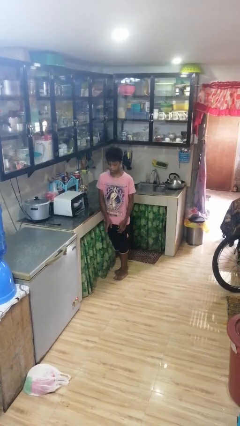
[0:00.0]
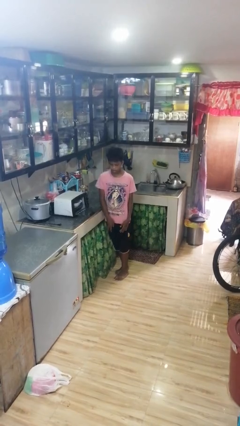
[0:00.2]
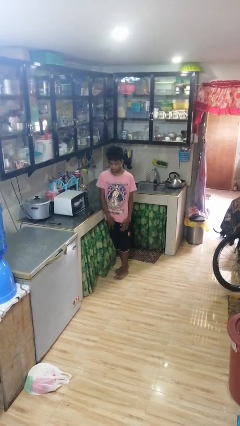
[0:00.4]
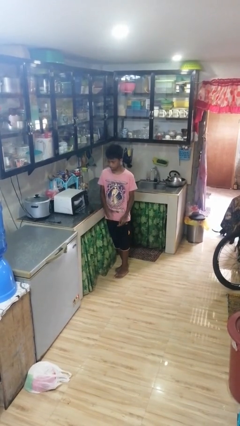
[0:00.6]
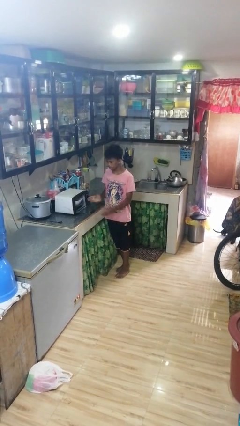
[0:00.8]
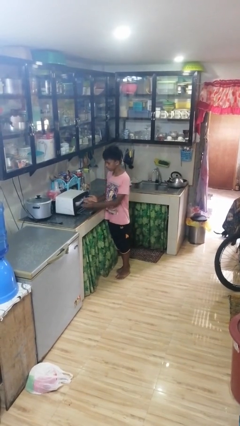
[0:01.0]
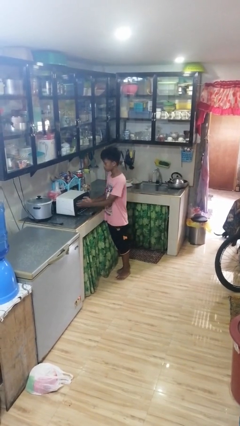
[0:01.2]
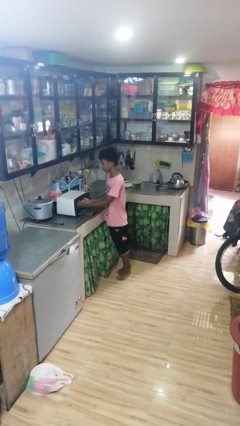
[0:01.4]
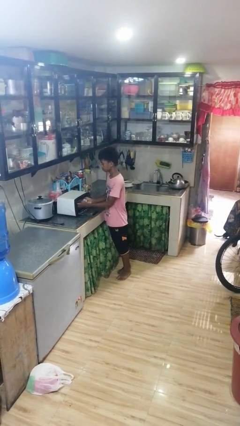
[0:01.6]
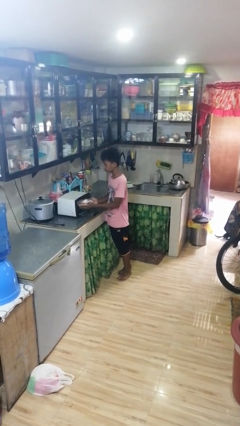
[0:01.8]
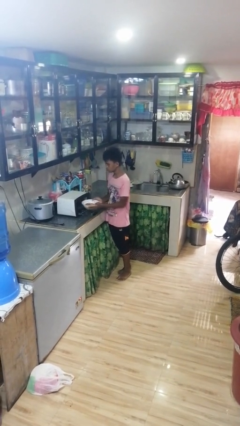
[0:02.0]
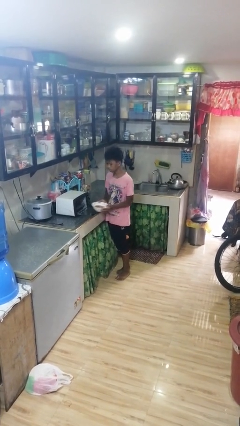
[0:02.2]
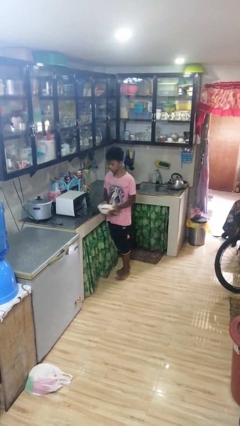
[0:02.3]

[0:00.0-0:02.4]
person takes object from microwave

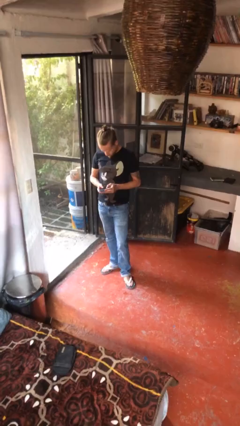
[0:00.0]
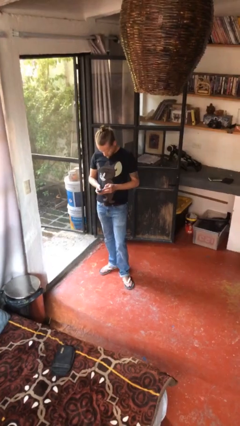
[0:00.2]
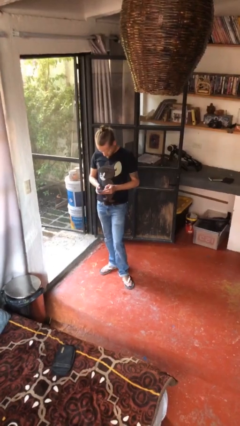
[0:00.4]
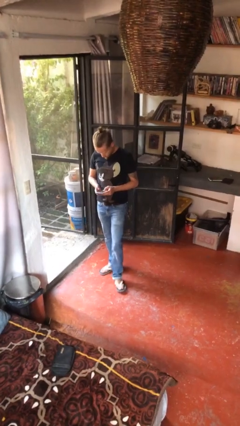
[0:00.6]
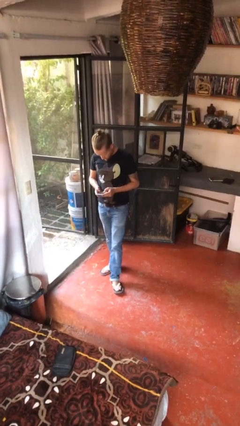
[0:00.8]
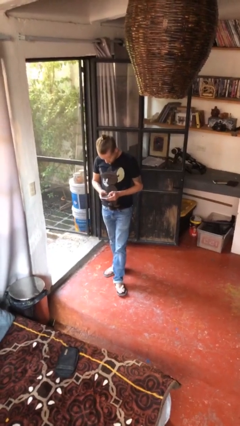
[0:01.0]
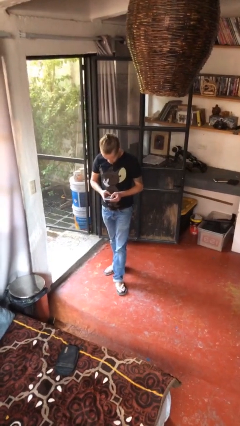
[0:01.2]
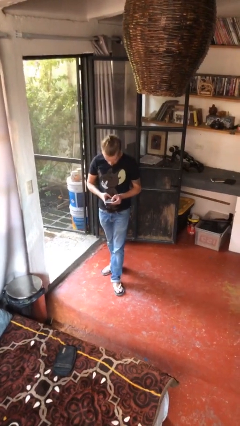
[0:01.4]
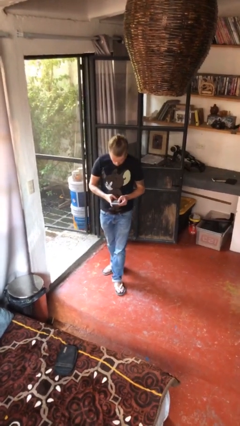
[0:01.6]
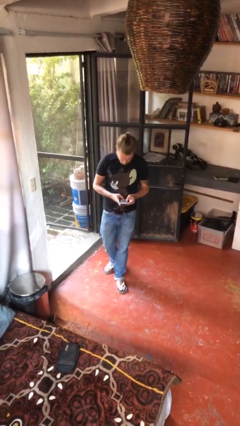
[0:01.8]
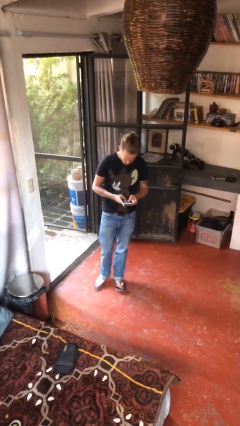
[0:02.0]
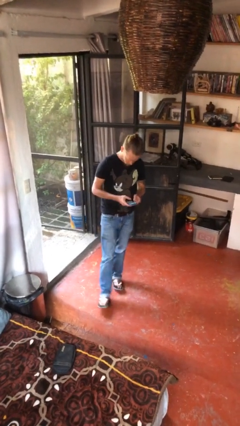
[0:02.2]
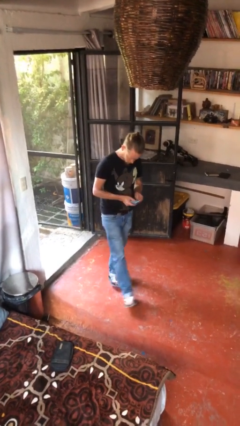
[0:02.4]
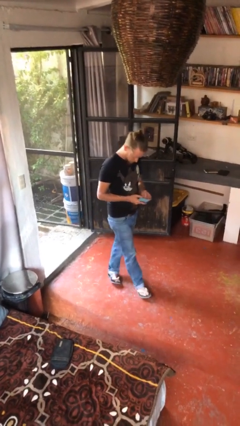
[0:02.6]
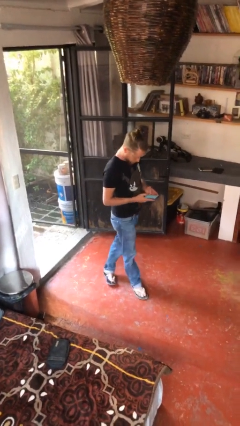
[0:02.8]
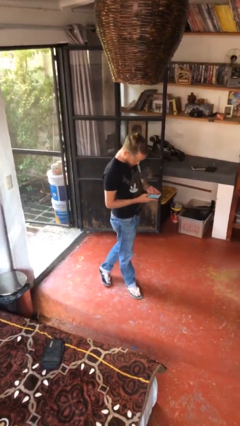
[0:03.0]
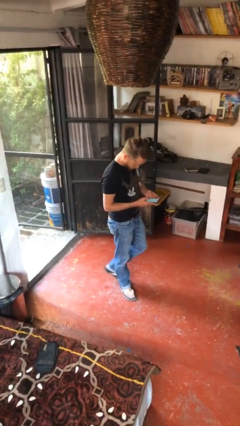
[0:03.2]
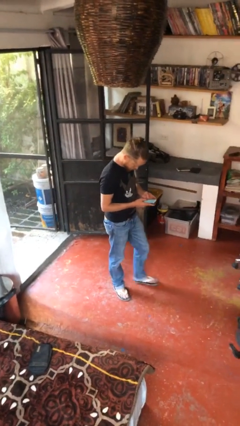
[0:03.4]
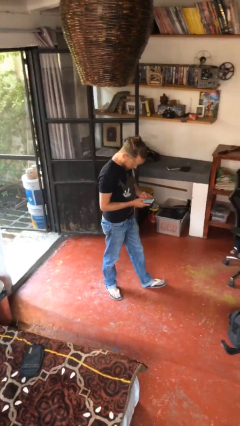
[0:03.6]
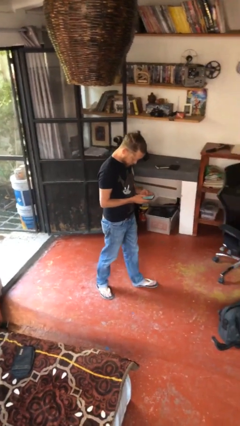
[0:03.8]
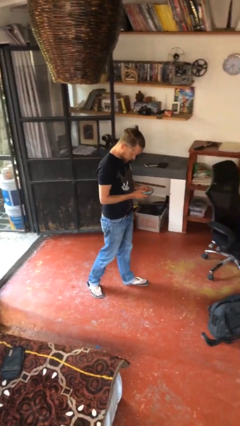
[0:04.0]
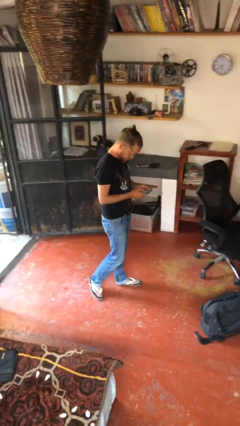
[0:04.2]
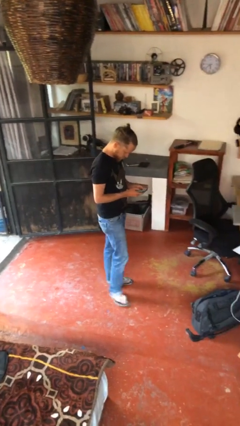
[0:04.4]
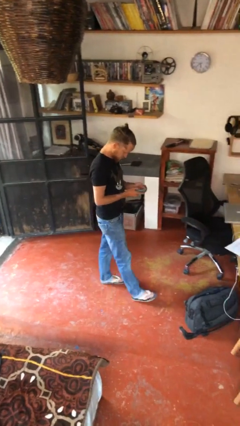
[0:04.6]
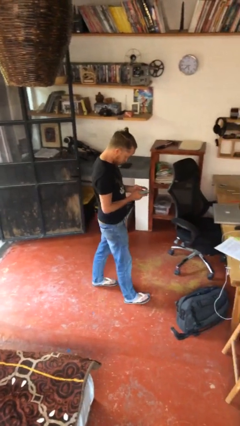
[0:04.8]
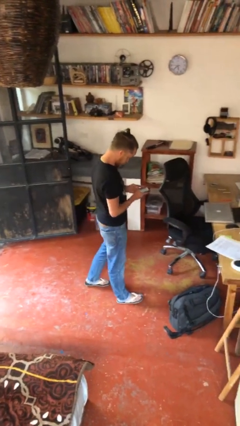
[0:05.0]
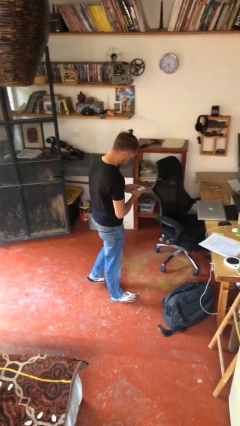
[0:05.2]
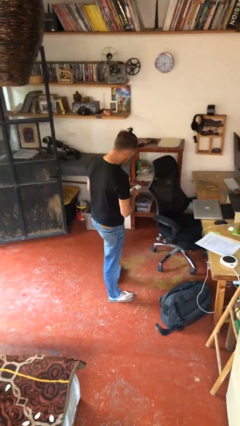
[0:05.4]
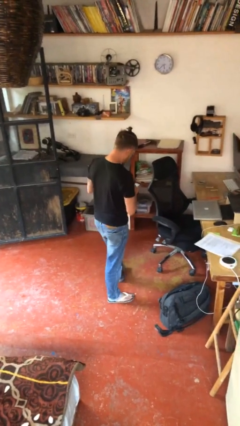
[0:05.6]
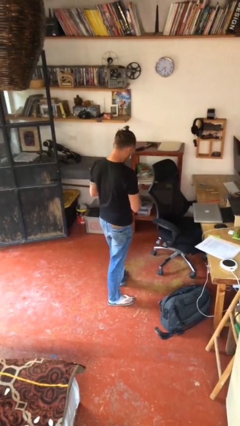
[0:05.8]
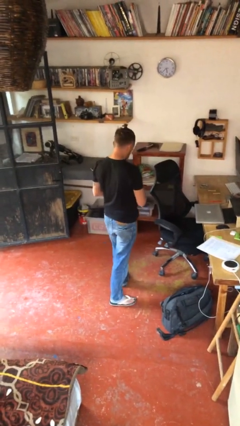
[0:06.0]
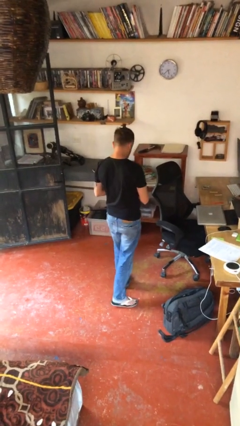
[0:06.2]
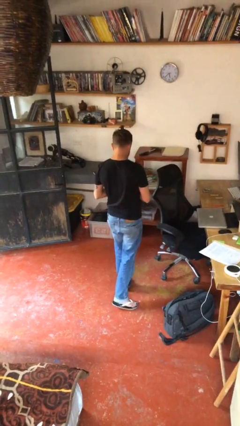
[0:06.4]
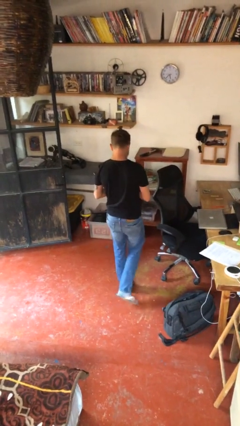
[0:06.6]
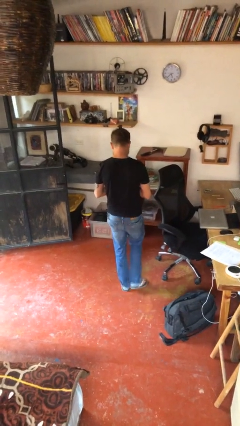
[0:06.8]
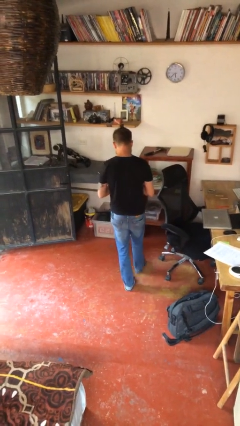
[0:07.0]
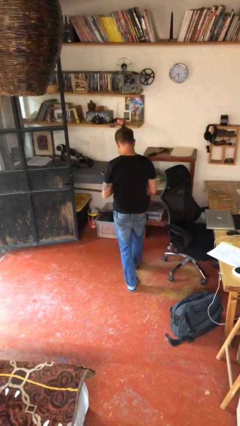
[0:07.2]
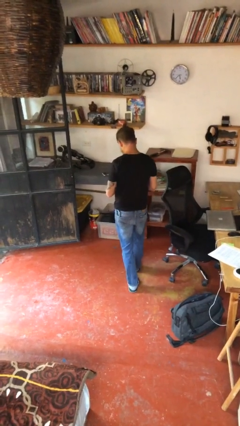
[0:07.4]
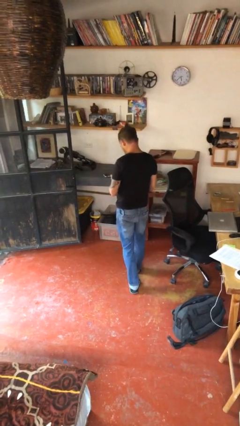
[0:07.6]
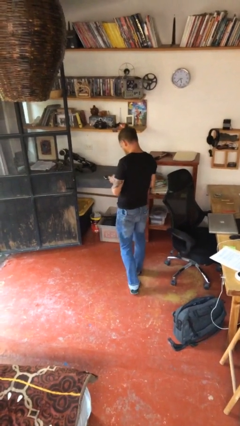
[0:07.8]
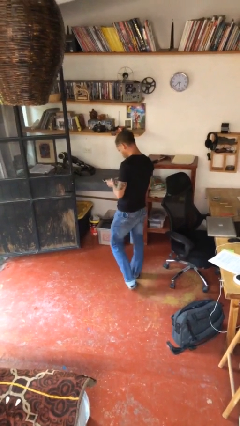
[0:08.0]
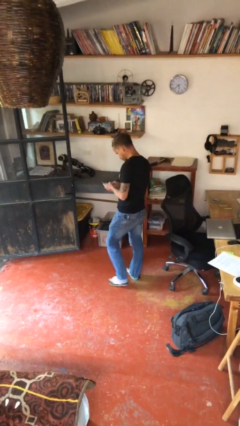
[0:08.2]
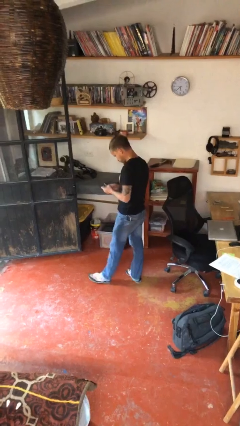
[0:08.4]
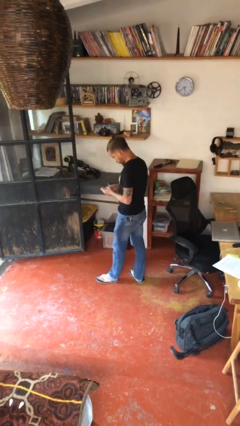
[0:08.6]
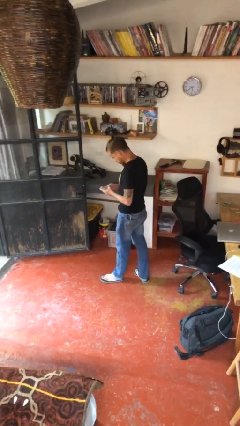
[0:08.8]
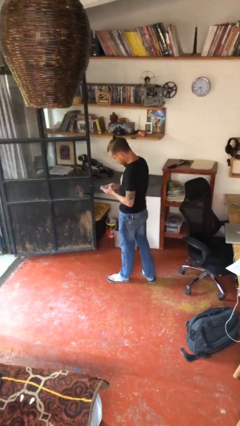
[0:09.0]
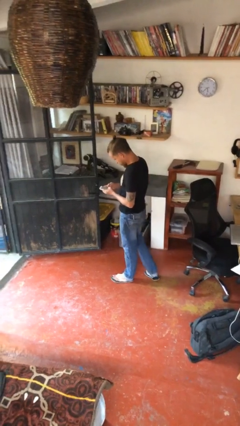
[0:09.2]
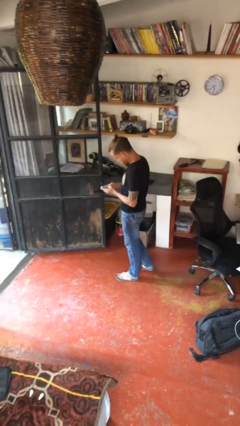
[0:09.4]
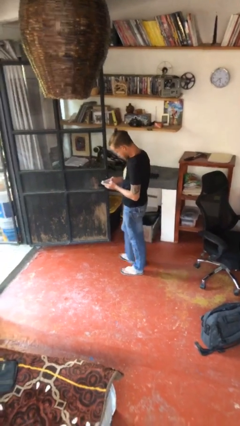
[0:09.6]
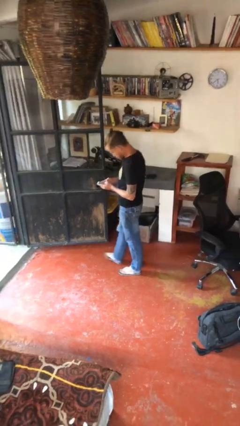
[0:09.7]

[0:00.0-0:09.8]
person texts on phone

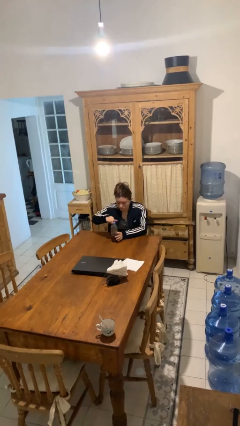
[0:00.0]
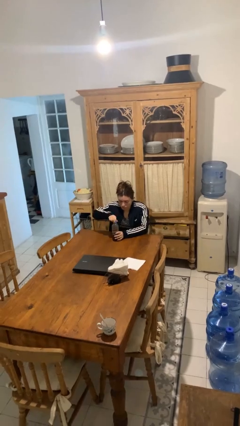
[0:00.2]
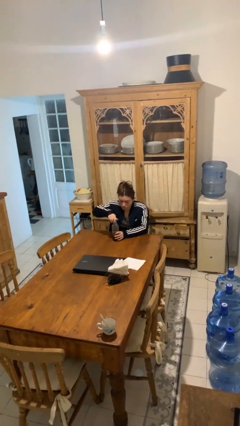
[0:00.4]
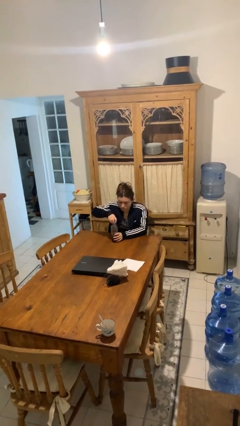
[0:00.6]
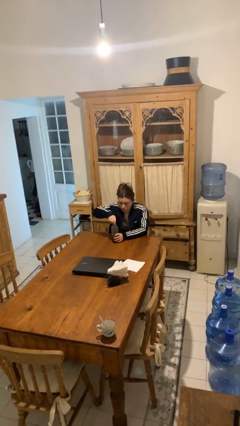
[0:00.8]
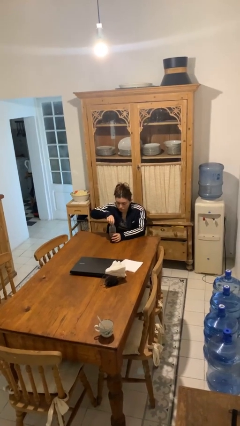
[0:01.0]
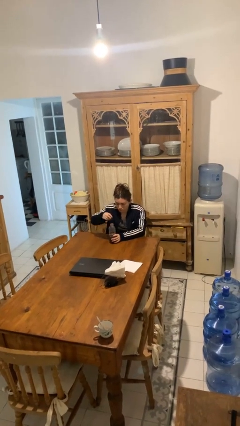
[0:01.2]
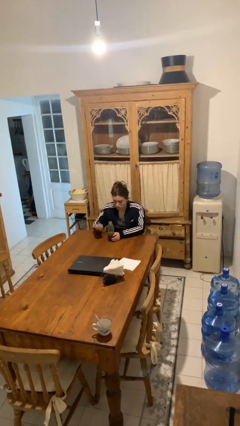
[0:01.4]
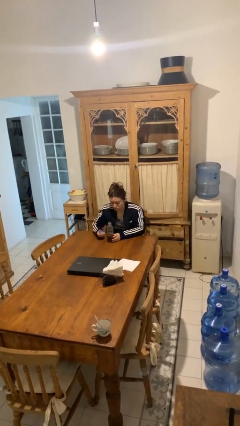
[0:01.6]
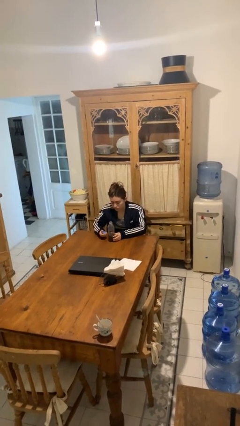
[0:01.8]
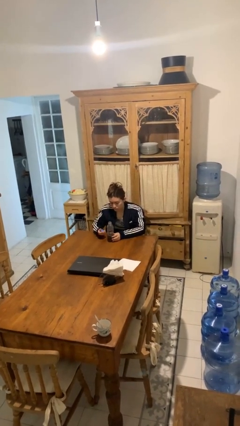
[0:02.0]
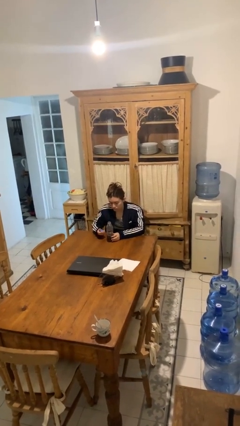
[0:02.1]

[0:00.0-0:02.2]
person unscrews lid from bottle

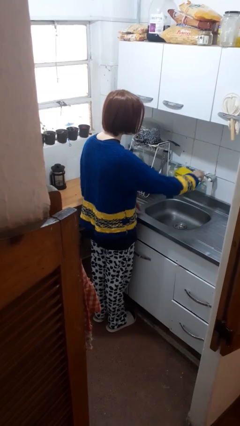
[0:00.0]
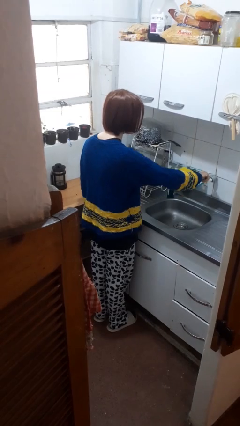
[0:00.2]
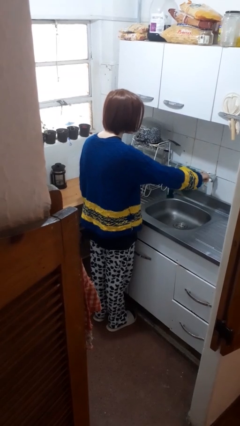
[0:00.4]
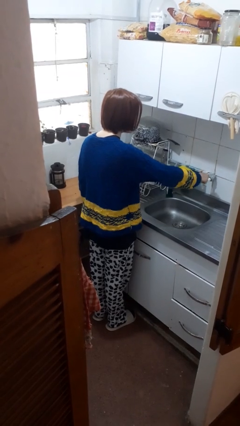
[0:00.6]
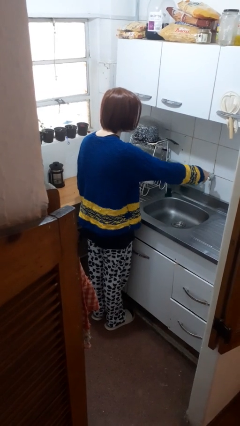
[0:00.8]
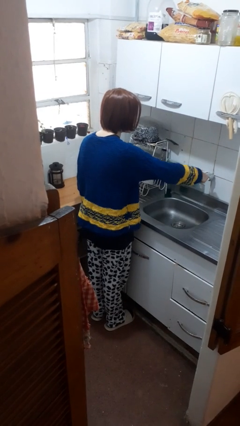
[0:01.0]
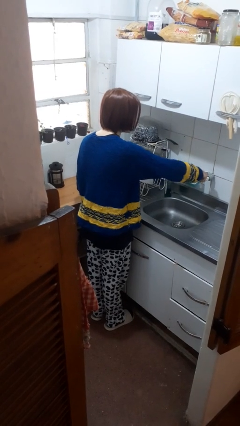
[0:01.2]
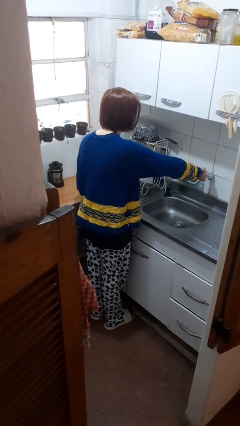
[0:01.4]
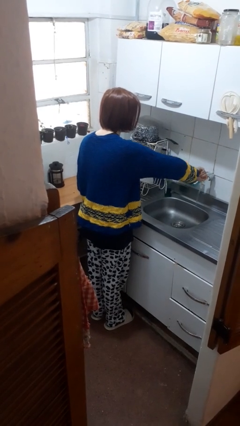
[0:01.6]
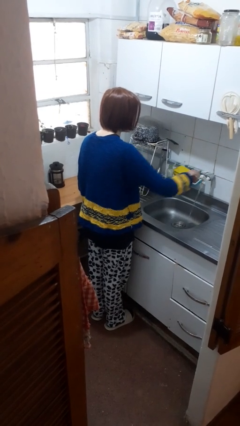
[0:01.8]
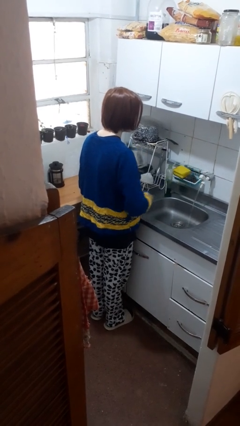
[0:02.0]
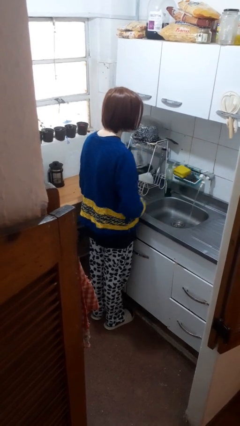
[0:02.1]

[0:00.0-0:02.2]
person turns on faucet

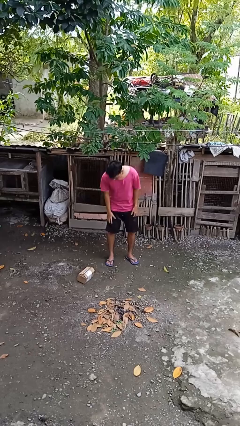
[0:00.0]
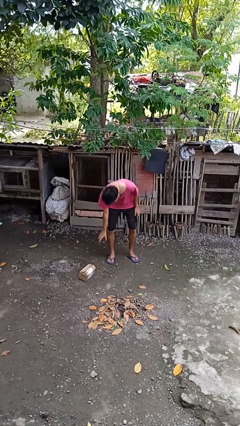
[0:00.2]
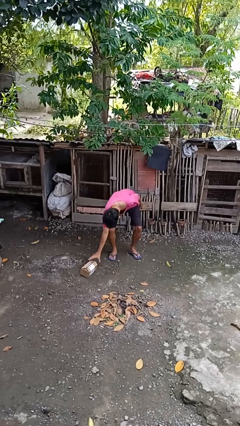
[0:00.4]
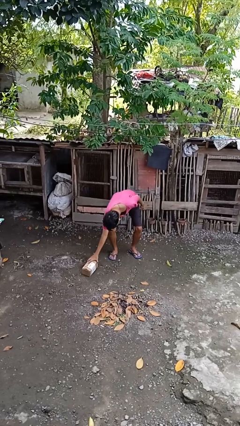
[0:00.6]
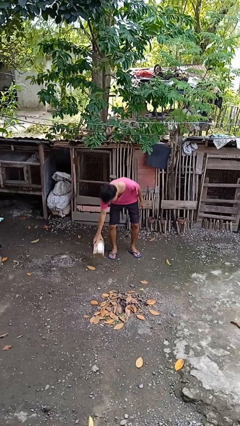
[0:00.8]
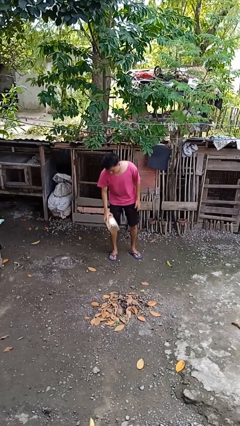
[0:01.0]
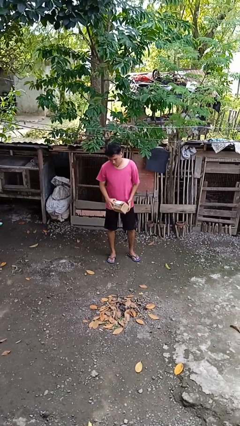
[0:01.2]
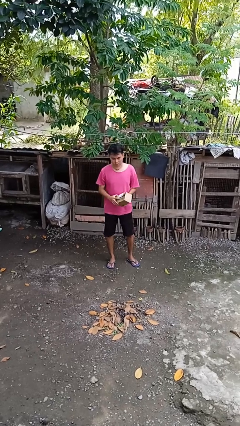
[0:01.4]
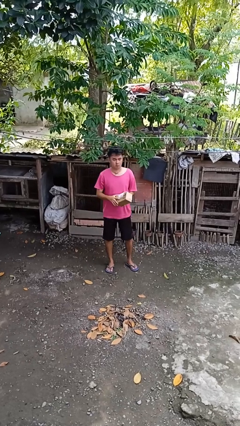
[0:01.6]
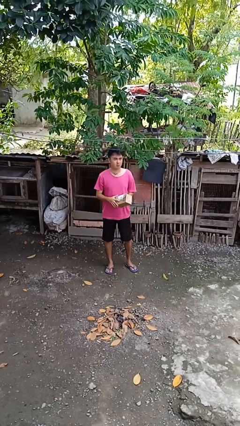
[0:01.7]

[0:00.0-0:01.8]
person picks up object from floor
